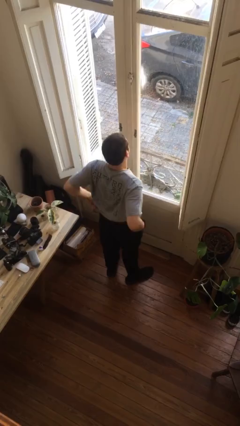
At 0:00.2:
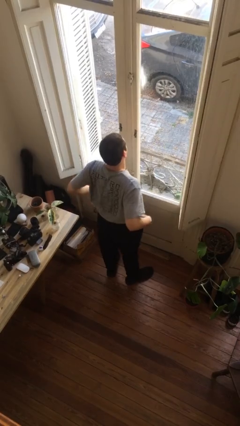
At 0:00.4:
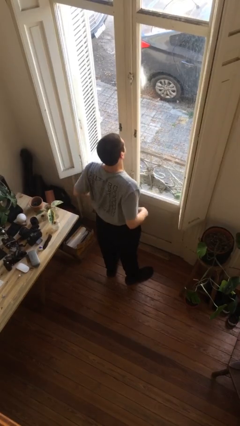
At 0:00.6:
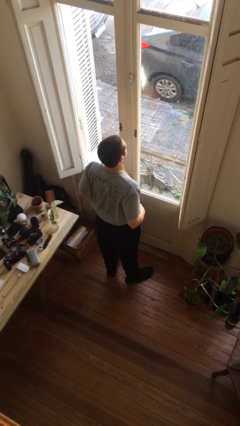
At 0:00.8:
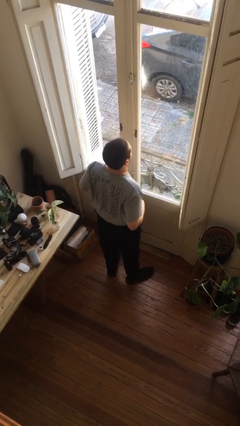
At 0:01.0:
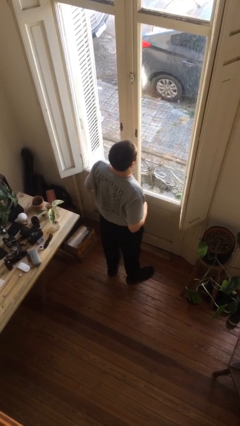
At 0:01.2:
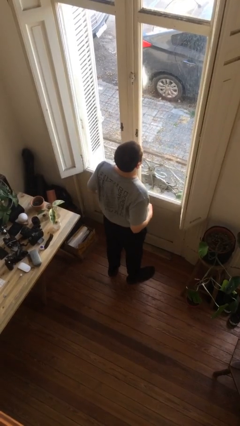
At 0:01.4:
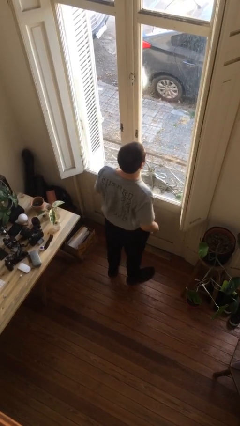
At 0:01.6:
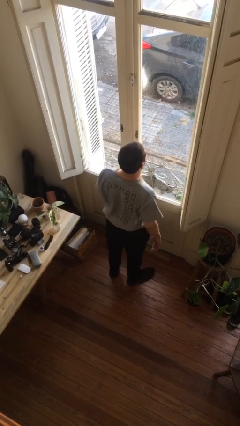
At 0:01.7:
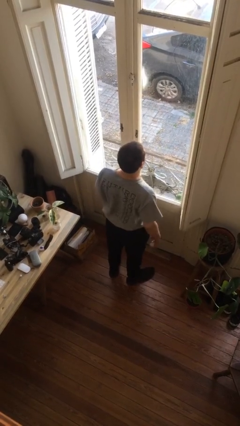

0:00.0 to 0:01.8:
person hikes up pants

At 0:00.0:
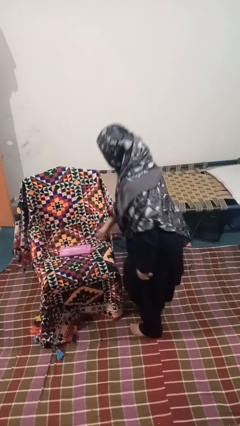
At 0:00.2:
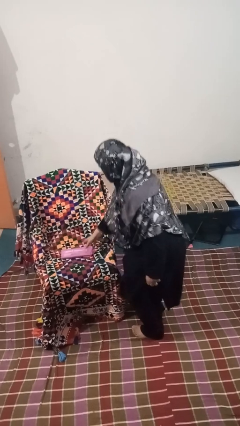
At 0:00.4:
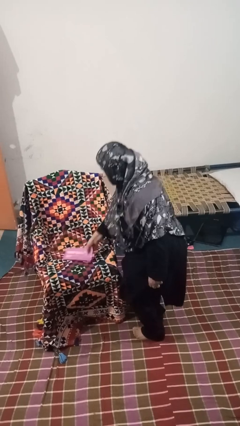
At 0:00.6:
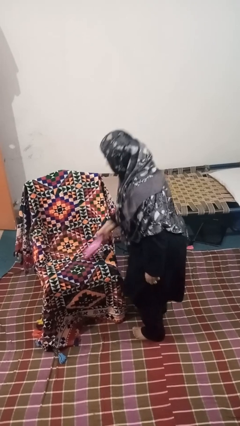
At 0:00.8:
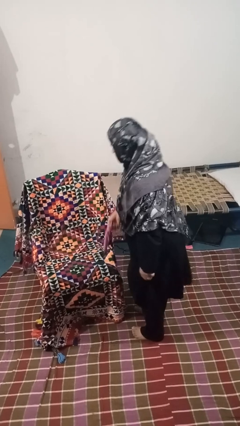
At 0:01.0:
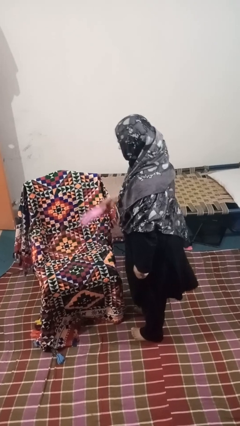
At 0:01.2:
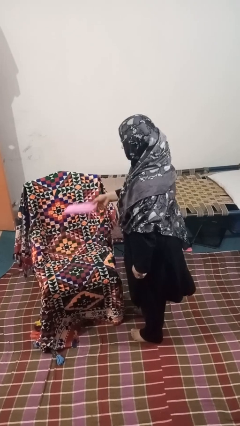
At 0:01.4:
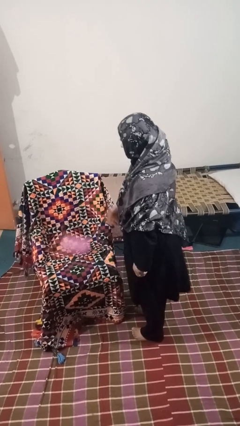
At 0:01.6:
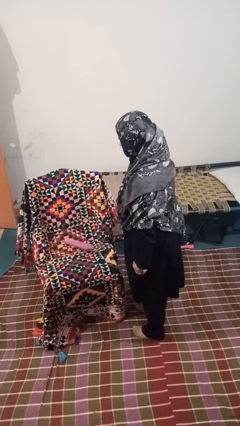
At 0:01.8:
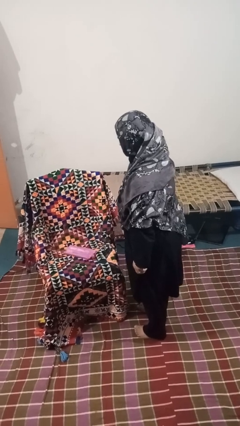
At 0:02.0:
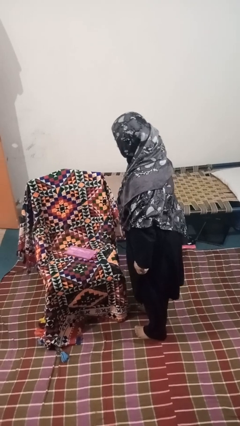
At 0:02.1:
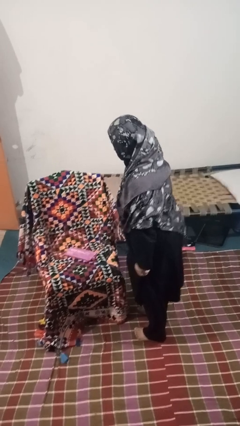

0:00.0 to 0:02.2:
person puts down object on couch

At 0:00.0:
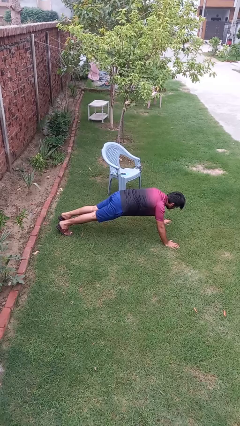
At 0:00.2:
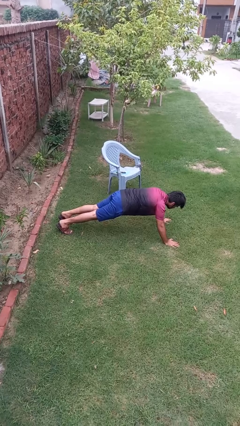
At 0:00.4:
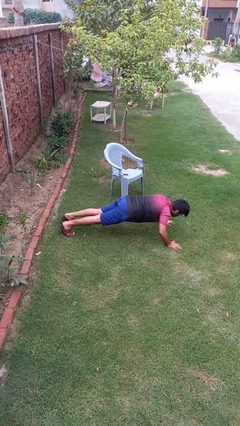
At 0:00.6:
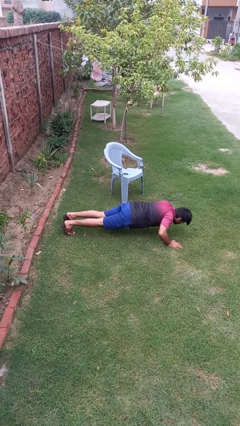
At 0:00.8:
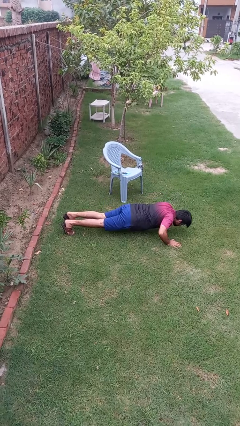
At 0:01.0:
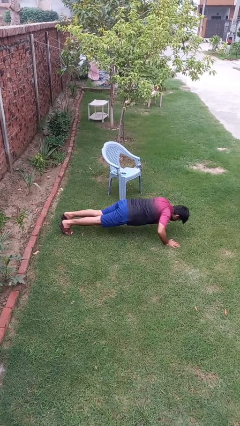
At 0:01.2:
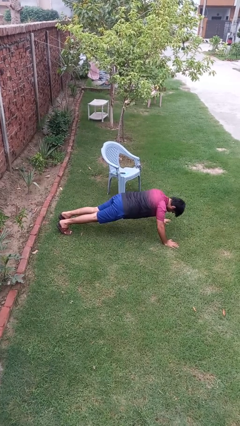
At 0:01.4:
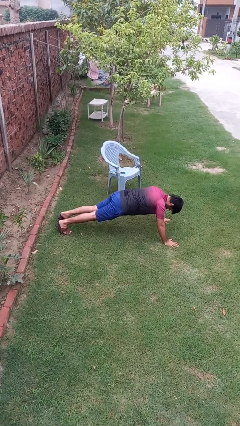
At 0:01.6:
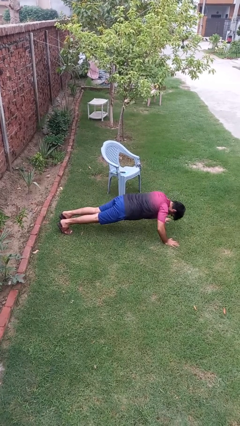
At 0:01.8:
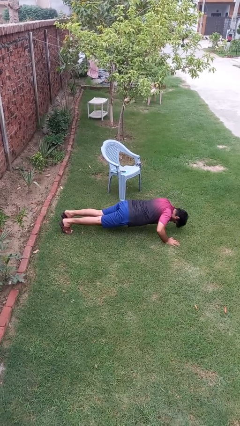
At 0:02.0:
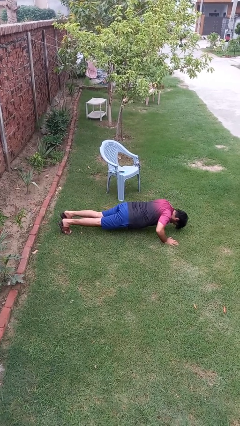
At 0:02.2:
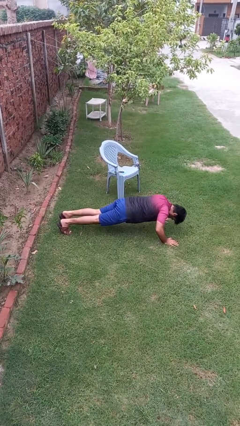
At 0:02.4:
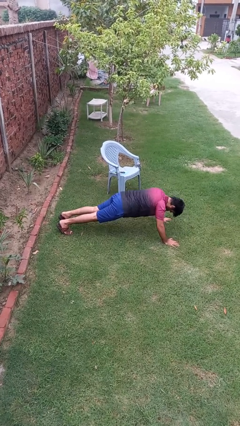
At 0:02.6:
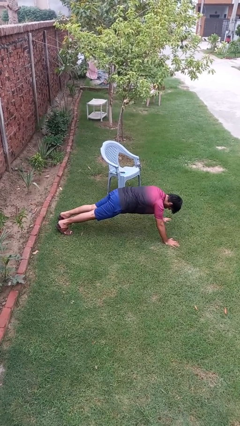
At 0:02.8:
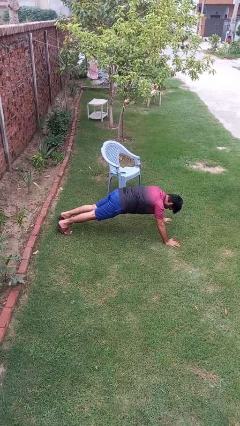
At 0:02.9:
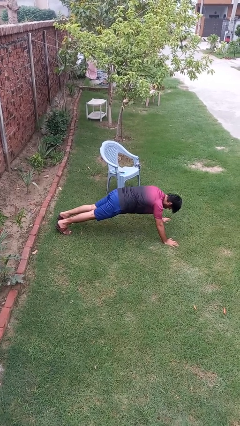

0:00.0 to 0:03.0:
person exercises with pushup

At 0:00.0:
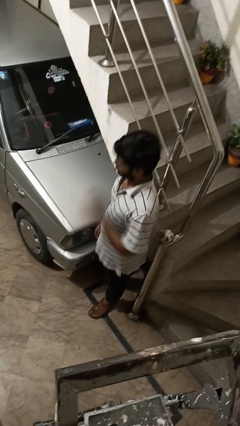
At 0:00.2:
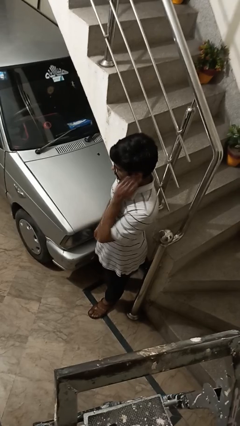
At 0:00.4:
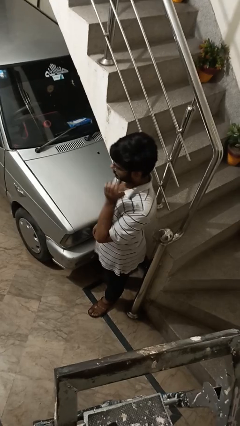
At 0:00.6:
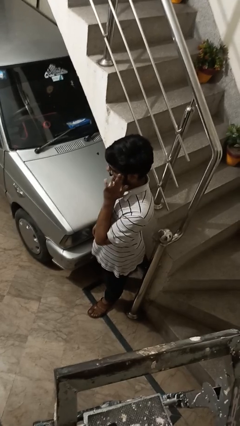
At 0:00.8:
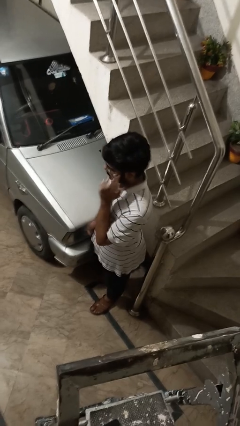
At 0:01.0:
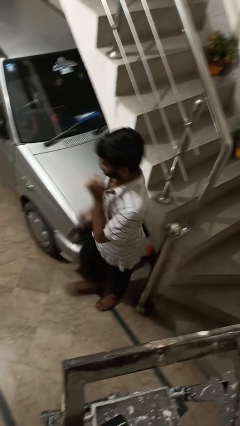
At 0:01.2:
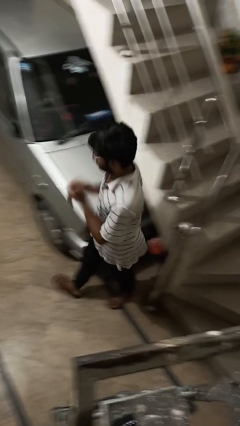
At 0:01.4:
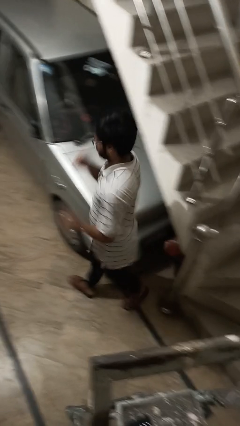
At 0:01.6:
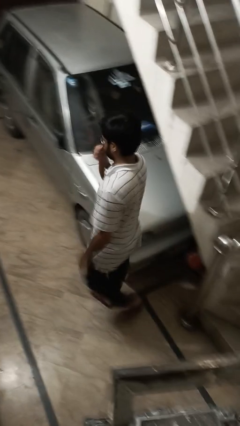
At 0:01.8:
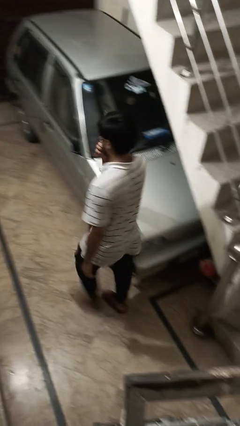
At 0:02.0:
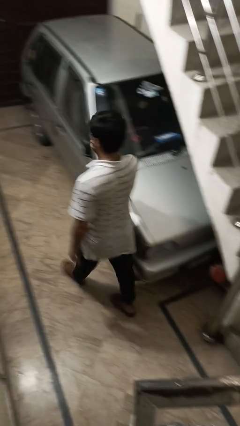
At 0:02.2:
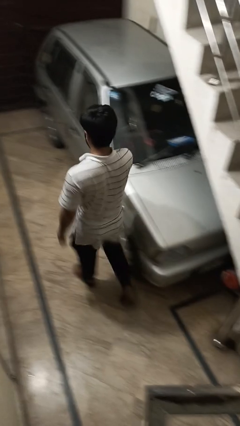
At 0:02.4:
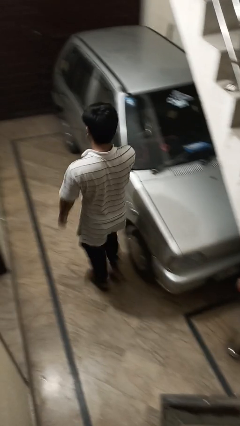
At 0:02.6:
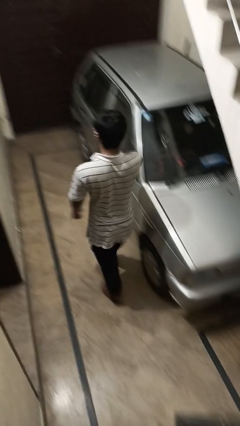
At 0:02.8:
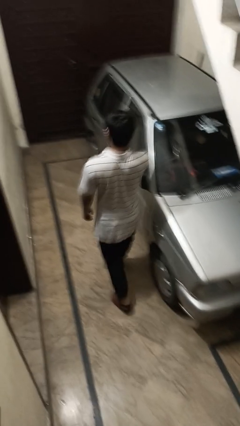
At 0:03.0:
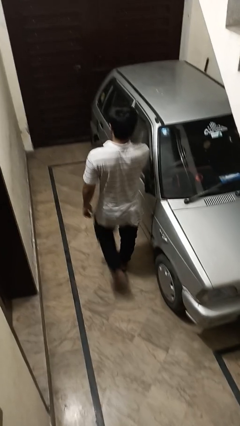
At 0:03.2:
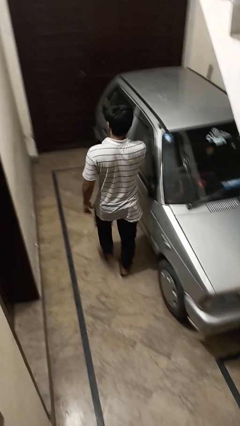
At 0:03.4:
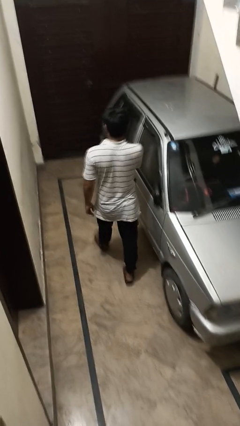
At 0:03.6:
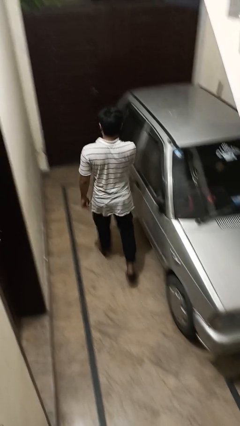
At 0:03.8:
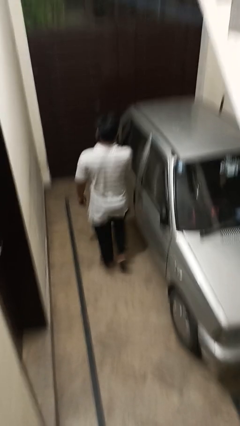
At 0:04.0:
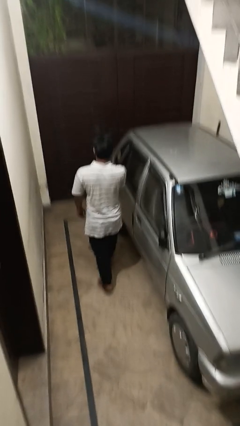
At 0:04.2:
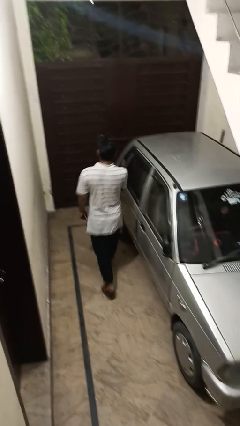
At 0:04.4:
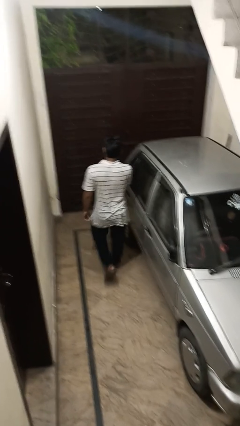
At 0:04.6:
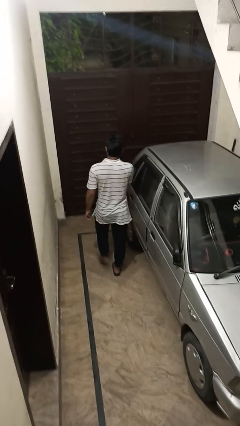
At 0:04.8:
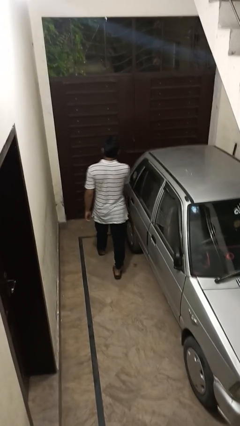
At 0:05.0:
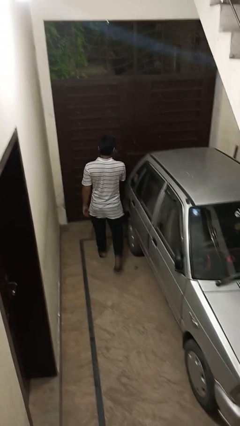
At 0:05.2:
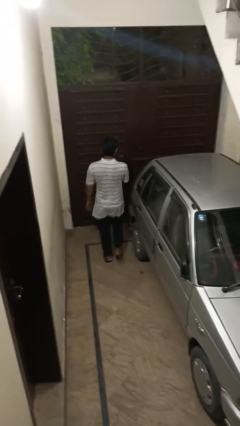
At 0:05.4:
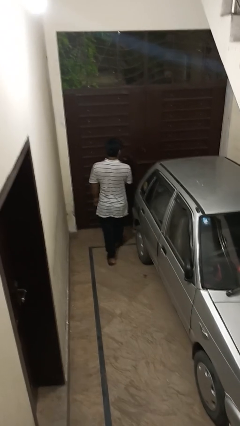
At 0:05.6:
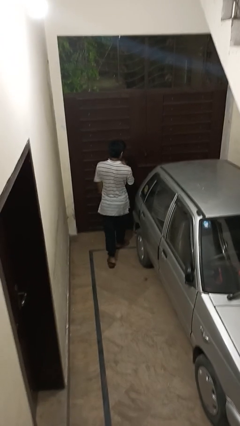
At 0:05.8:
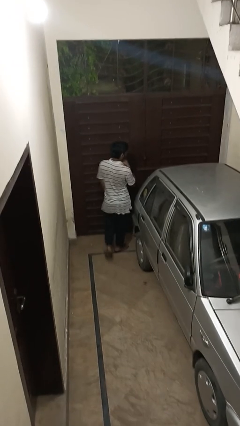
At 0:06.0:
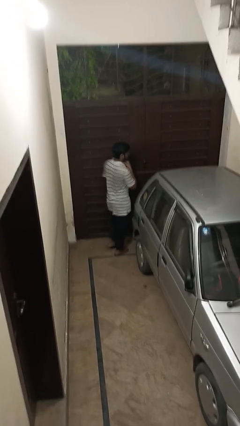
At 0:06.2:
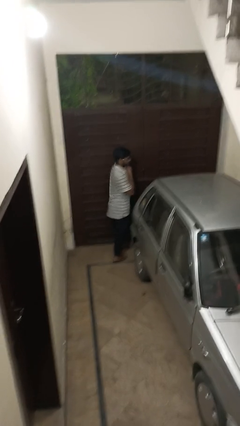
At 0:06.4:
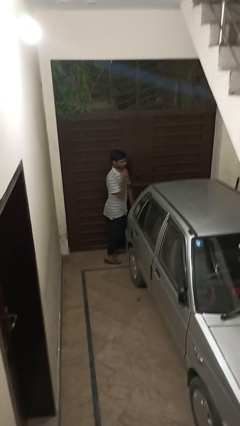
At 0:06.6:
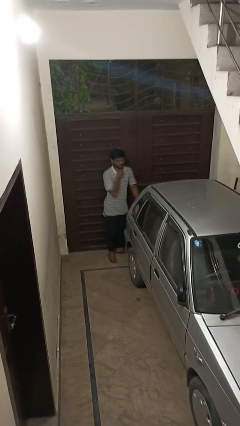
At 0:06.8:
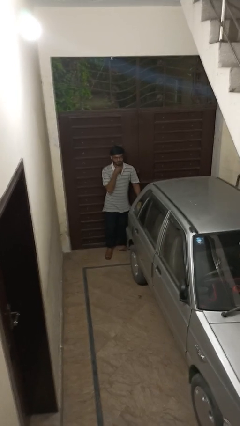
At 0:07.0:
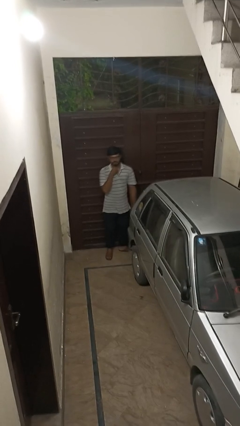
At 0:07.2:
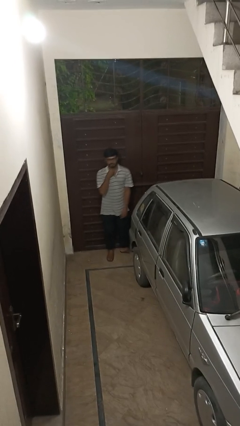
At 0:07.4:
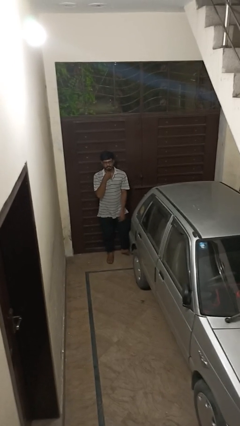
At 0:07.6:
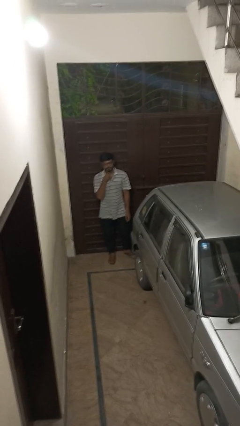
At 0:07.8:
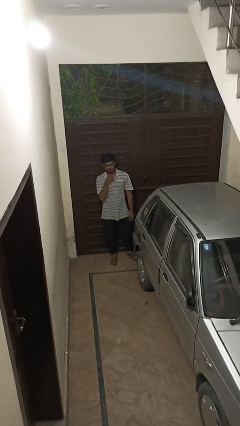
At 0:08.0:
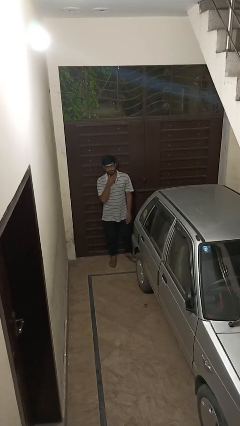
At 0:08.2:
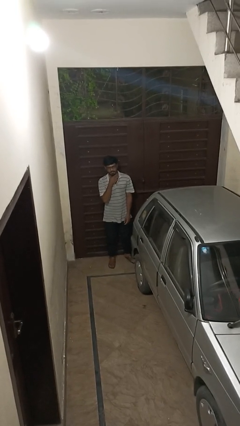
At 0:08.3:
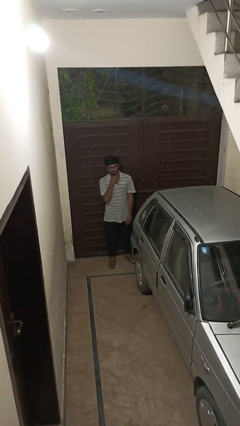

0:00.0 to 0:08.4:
person walks around car

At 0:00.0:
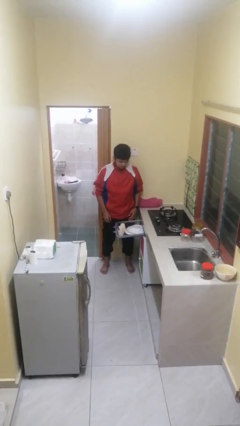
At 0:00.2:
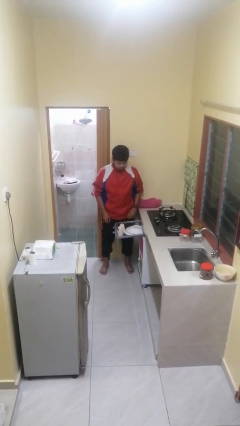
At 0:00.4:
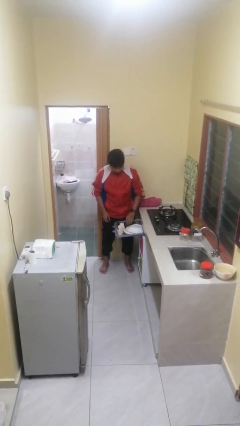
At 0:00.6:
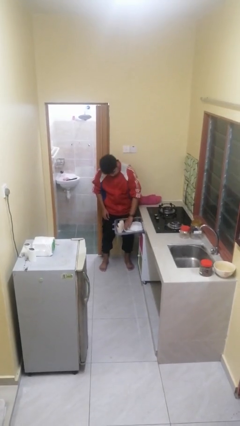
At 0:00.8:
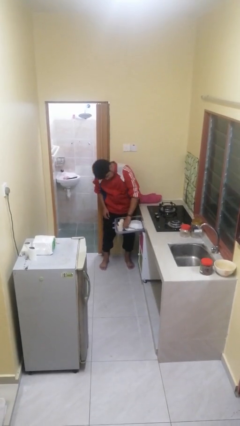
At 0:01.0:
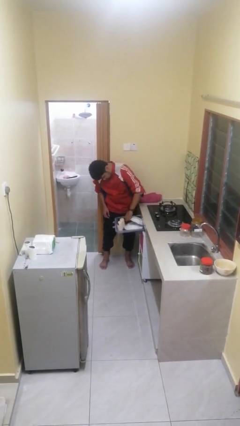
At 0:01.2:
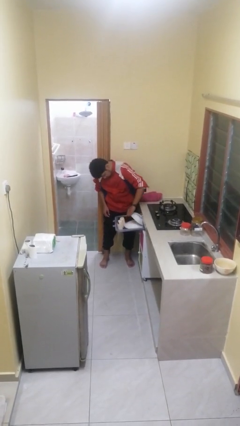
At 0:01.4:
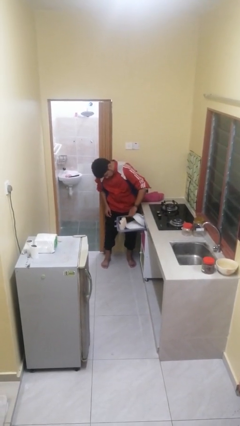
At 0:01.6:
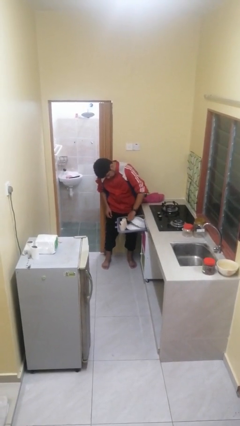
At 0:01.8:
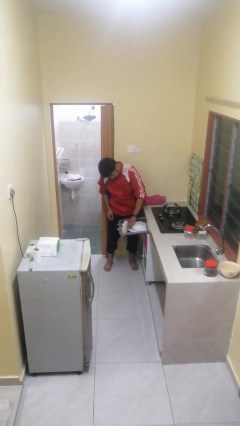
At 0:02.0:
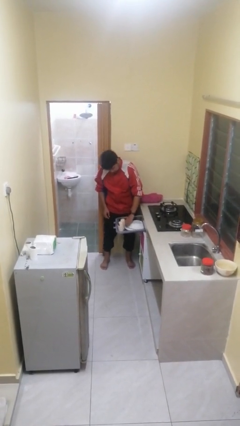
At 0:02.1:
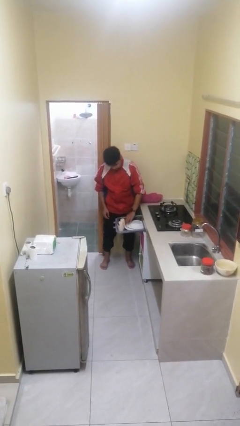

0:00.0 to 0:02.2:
person searches in kitchen drawer
